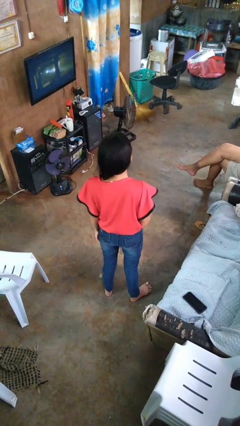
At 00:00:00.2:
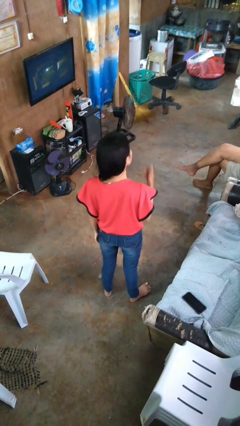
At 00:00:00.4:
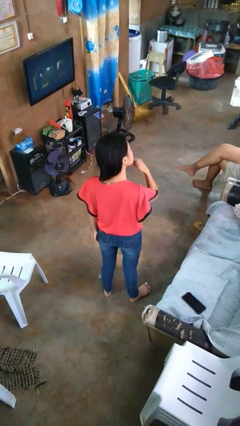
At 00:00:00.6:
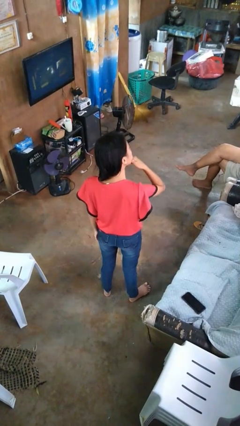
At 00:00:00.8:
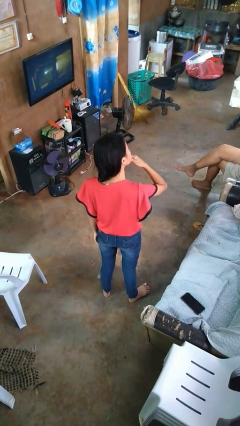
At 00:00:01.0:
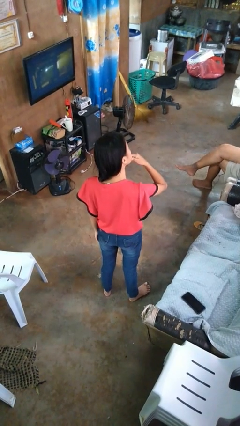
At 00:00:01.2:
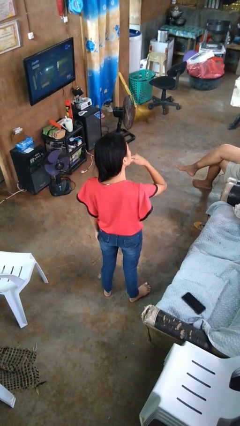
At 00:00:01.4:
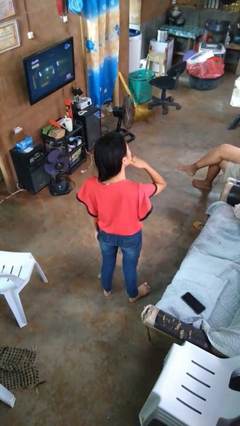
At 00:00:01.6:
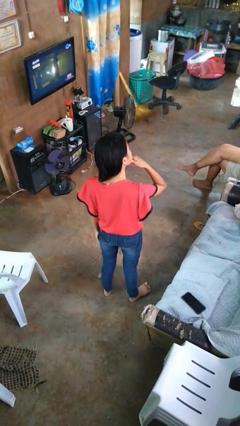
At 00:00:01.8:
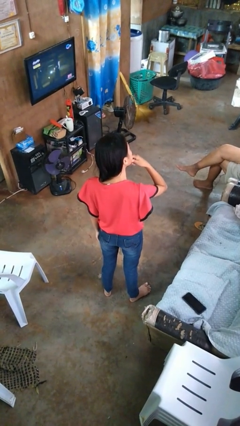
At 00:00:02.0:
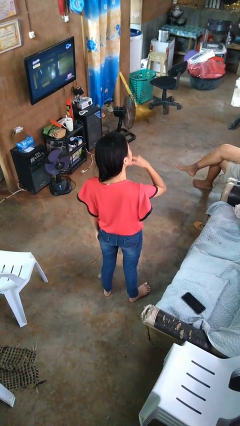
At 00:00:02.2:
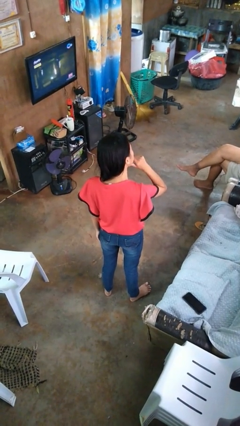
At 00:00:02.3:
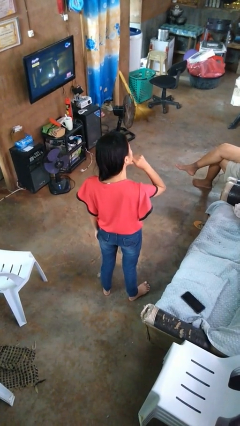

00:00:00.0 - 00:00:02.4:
person strokes chin

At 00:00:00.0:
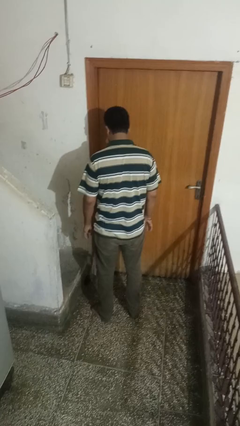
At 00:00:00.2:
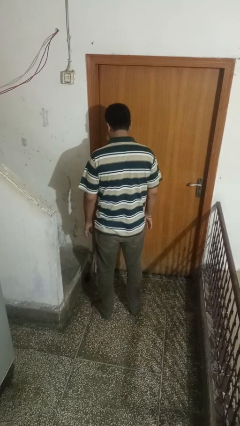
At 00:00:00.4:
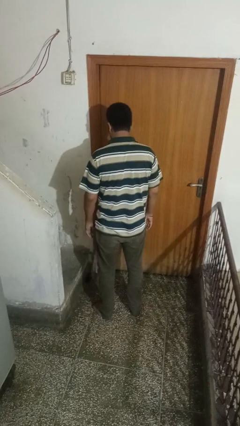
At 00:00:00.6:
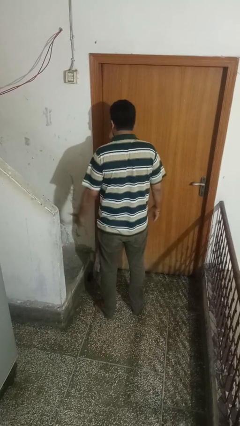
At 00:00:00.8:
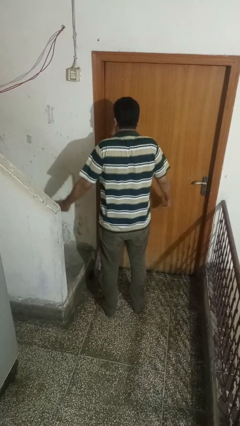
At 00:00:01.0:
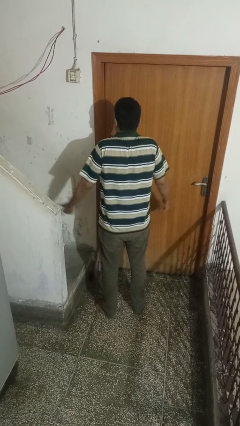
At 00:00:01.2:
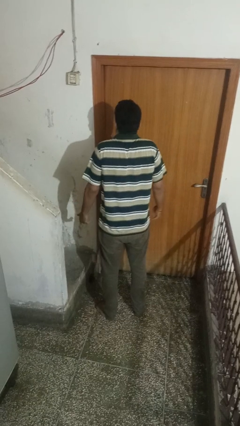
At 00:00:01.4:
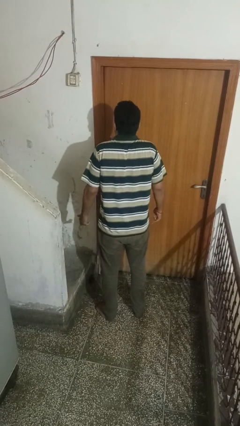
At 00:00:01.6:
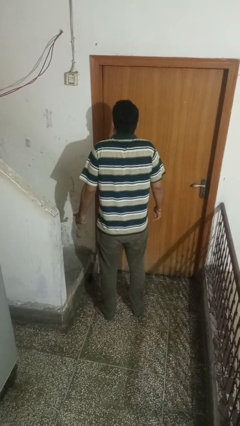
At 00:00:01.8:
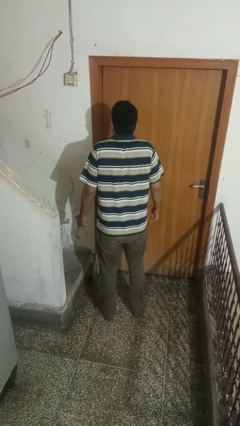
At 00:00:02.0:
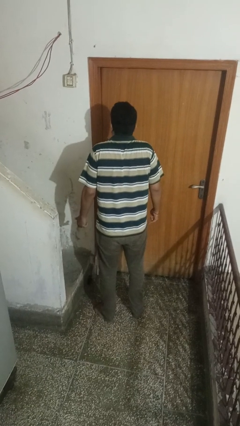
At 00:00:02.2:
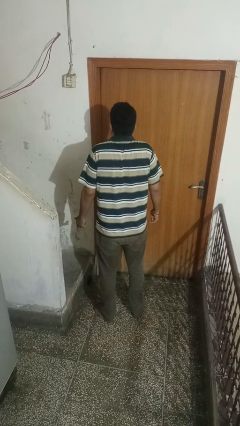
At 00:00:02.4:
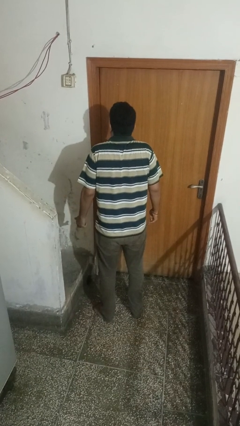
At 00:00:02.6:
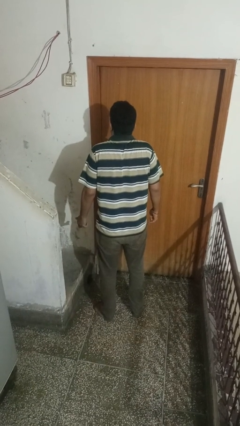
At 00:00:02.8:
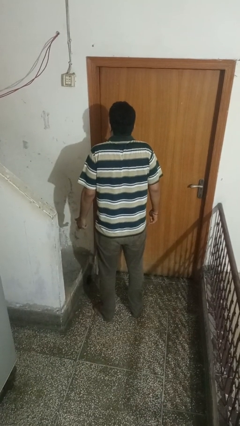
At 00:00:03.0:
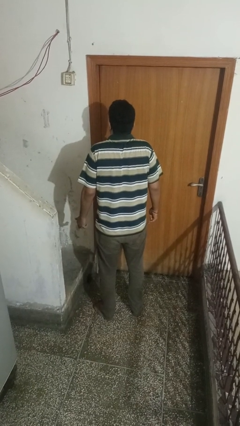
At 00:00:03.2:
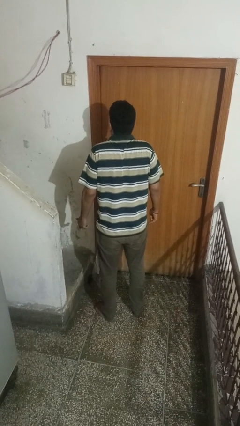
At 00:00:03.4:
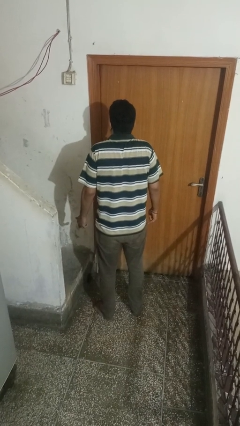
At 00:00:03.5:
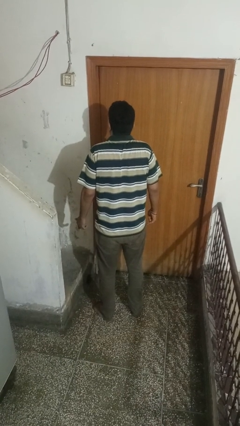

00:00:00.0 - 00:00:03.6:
person shrugs

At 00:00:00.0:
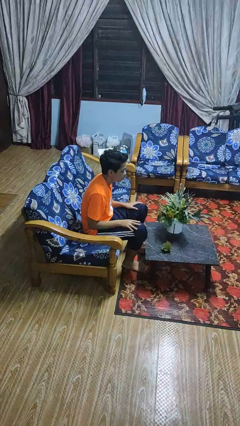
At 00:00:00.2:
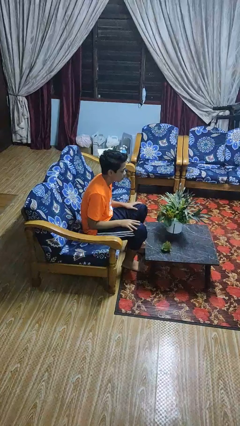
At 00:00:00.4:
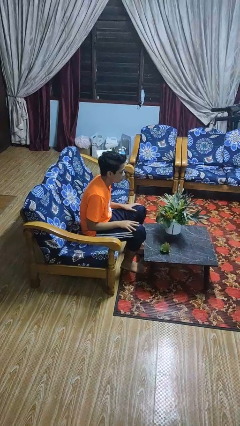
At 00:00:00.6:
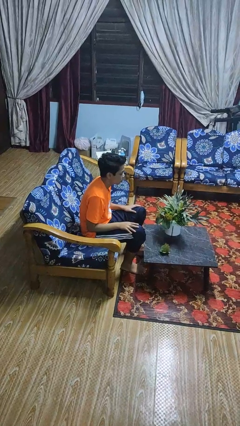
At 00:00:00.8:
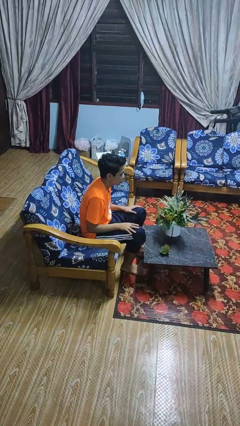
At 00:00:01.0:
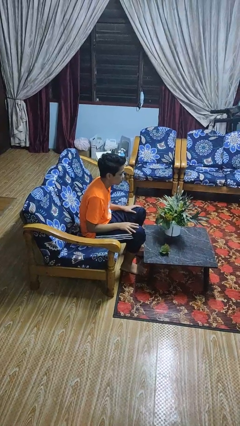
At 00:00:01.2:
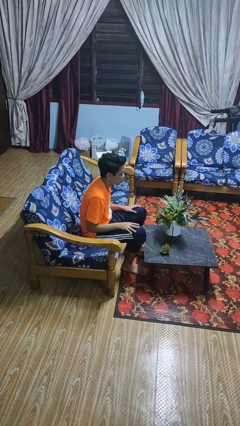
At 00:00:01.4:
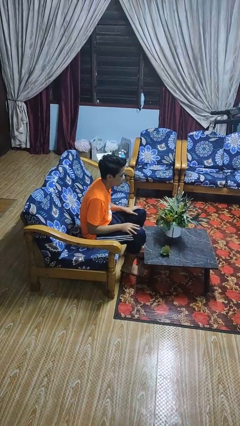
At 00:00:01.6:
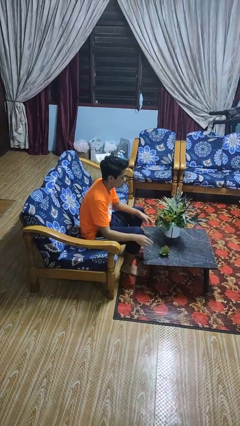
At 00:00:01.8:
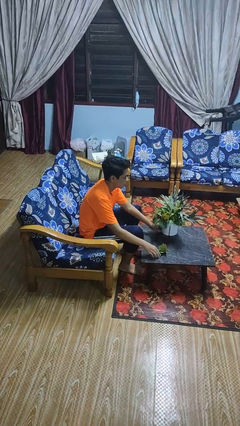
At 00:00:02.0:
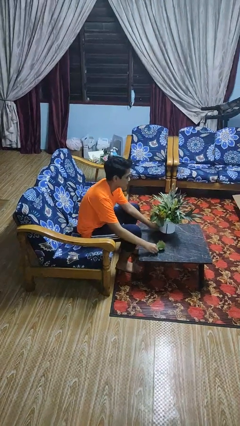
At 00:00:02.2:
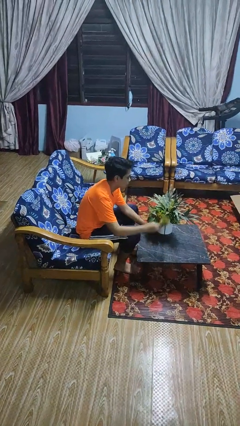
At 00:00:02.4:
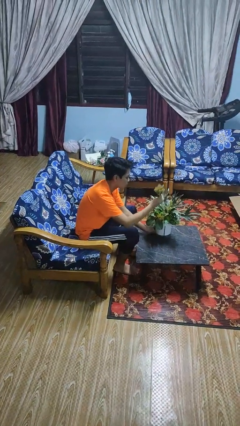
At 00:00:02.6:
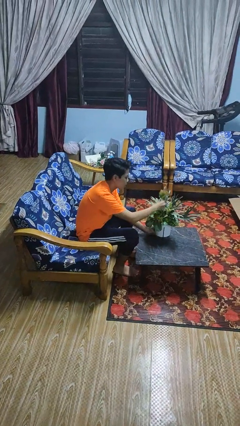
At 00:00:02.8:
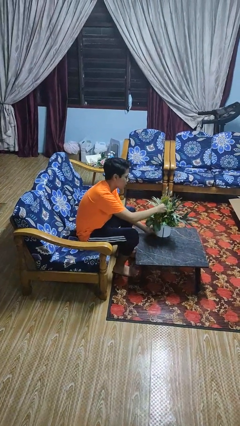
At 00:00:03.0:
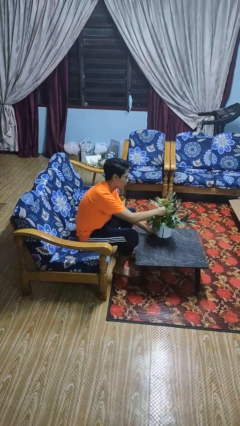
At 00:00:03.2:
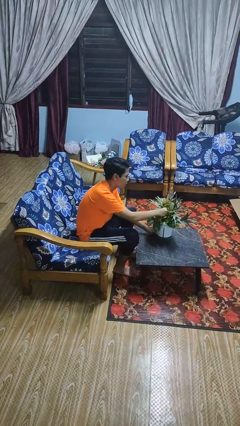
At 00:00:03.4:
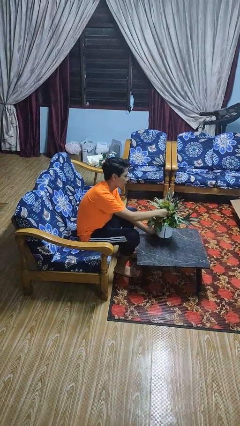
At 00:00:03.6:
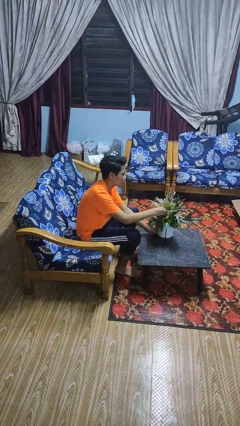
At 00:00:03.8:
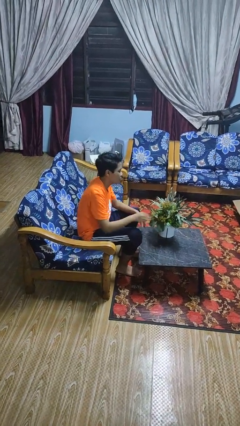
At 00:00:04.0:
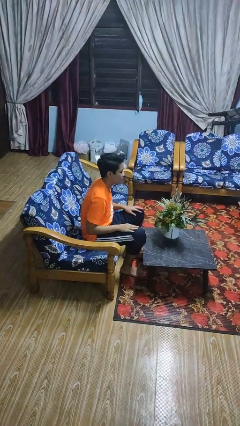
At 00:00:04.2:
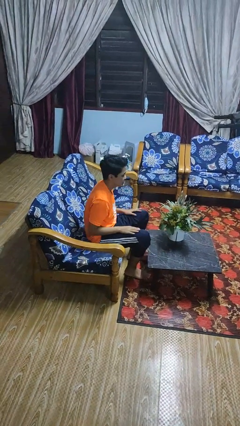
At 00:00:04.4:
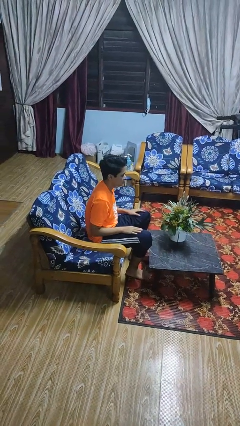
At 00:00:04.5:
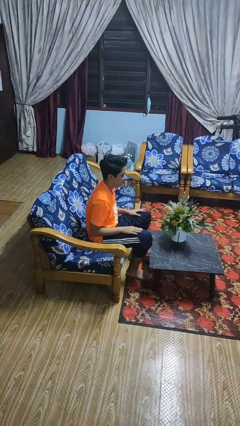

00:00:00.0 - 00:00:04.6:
person arranges flowers in vase

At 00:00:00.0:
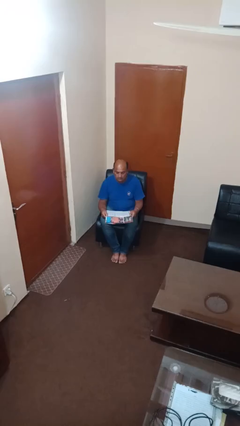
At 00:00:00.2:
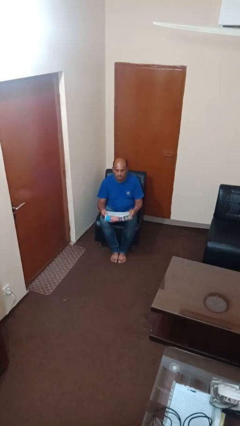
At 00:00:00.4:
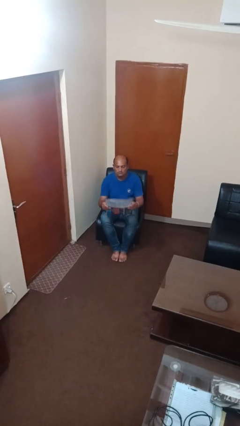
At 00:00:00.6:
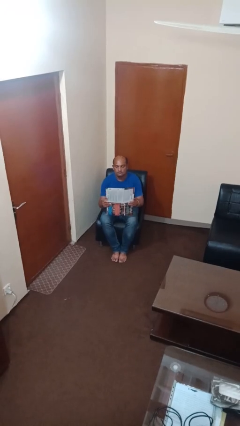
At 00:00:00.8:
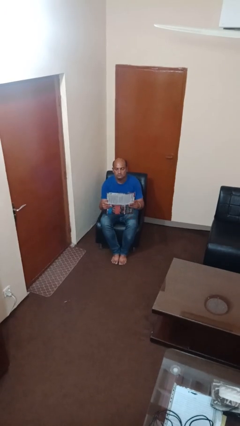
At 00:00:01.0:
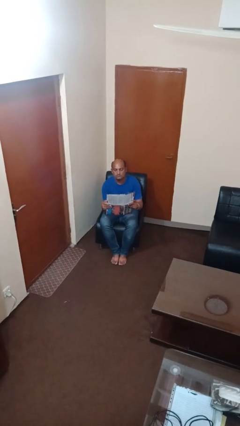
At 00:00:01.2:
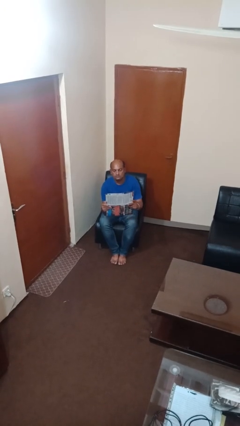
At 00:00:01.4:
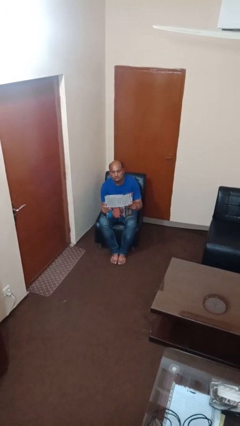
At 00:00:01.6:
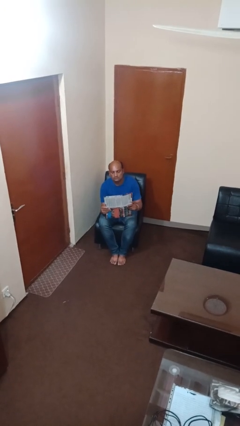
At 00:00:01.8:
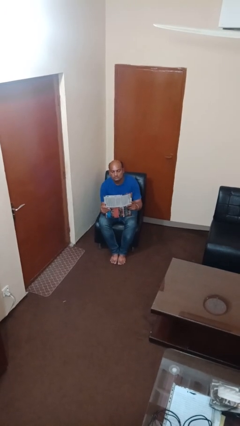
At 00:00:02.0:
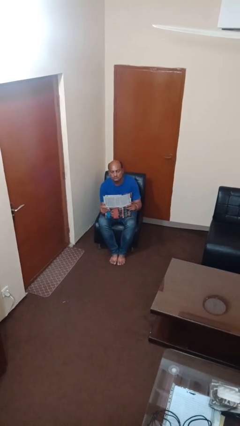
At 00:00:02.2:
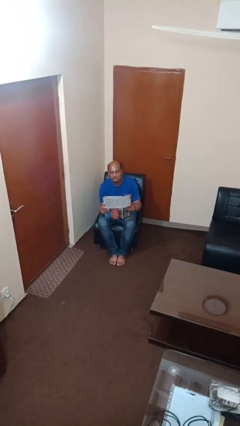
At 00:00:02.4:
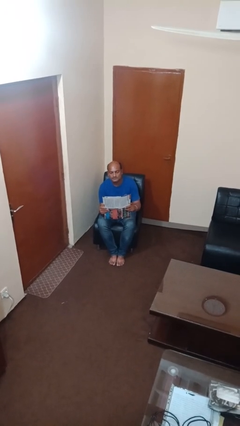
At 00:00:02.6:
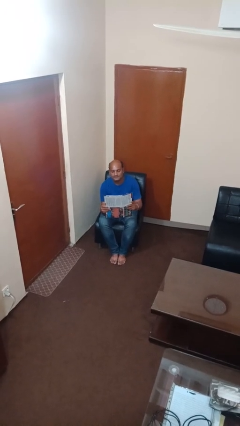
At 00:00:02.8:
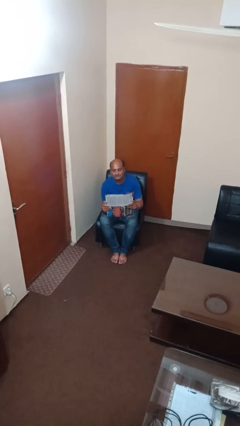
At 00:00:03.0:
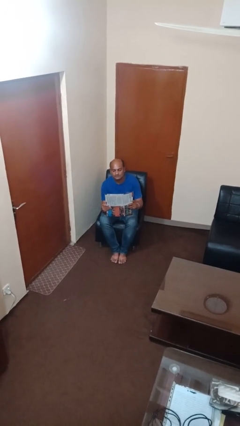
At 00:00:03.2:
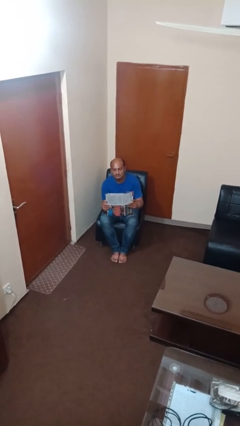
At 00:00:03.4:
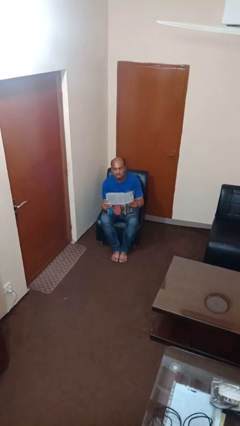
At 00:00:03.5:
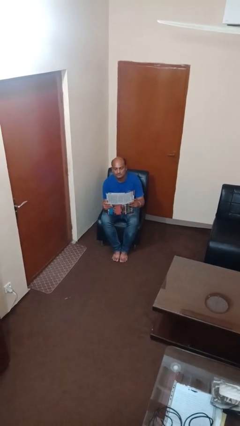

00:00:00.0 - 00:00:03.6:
person reads newspaper

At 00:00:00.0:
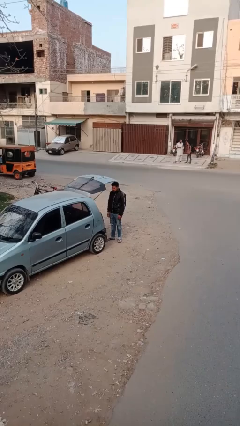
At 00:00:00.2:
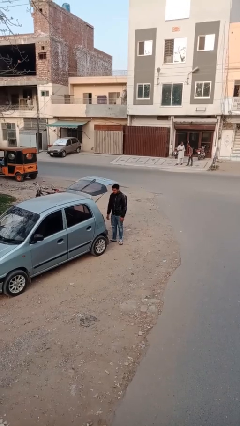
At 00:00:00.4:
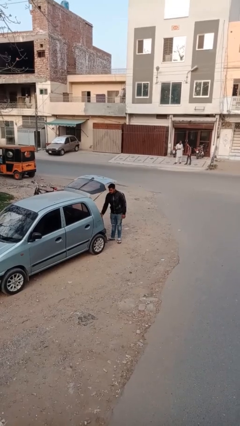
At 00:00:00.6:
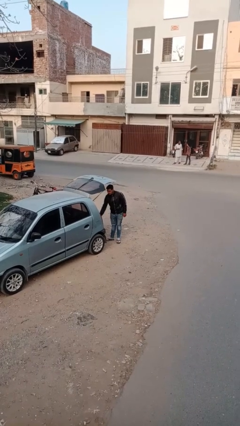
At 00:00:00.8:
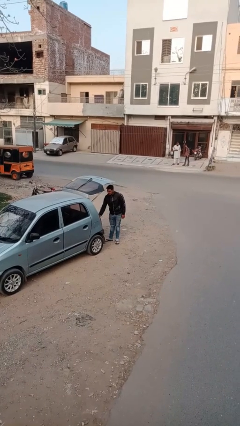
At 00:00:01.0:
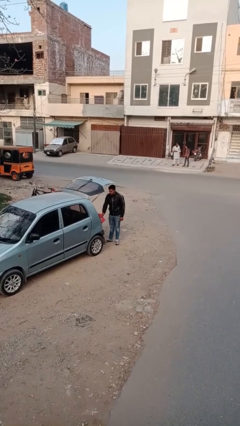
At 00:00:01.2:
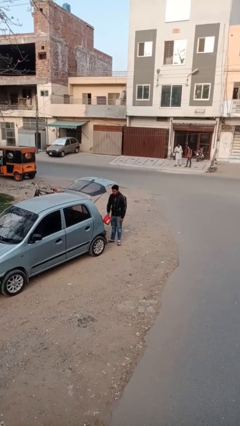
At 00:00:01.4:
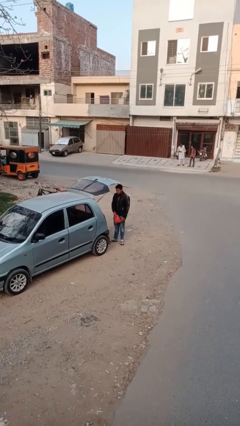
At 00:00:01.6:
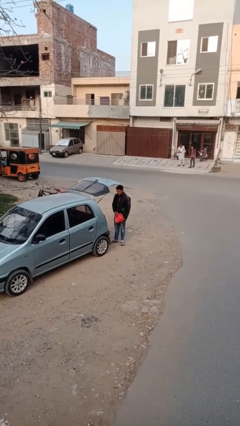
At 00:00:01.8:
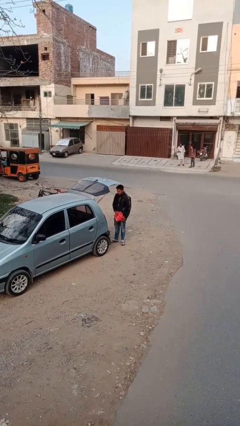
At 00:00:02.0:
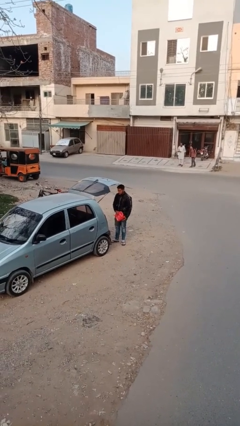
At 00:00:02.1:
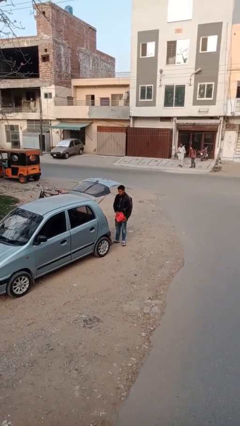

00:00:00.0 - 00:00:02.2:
person unloads car

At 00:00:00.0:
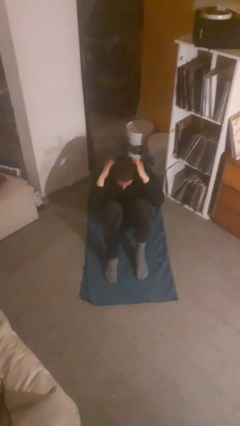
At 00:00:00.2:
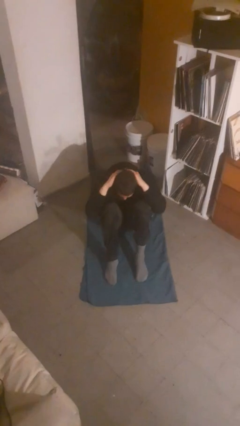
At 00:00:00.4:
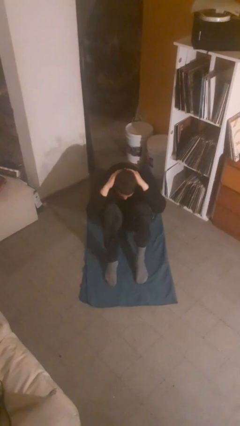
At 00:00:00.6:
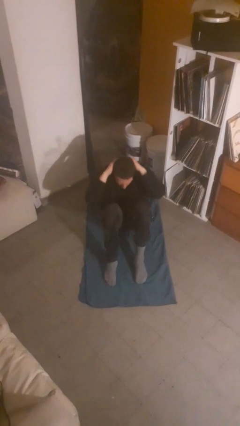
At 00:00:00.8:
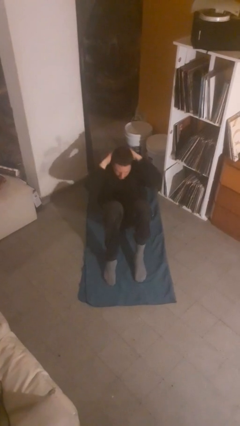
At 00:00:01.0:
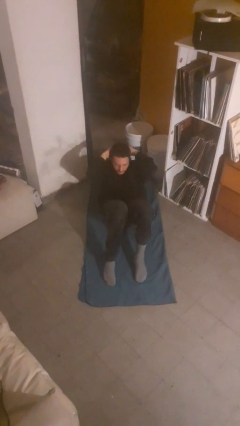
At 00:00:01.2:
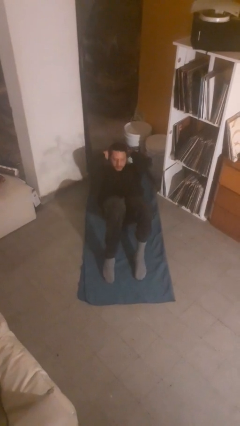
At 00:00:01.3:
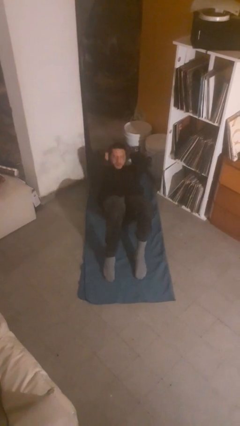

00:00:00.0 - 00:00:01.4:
person exercises with situp
